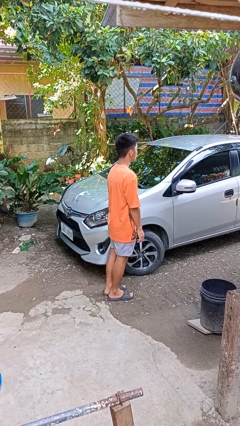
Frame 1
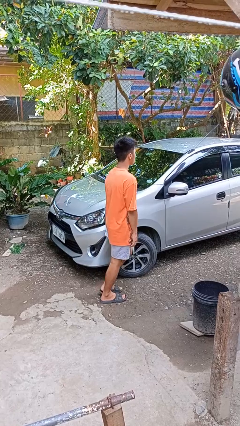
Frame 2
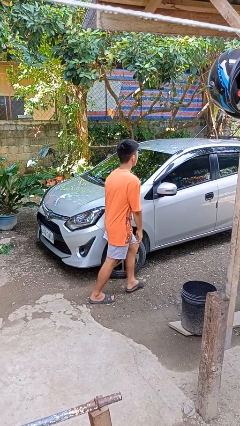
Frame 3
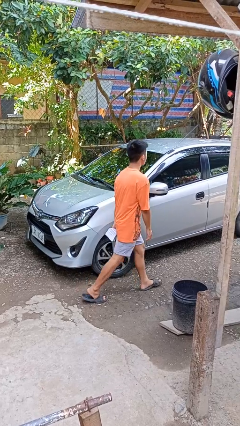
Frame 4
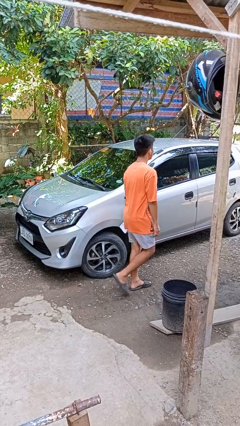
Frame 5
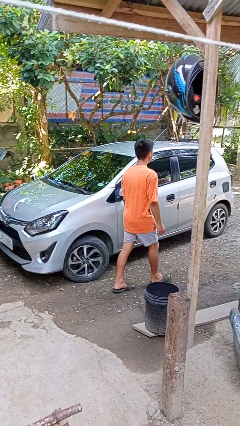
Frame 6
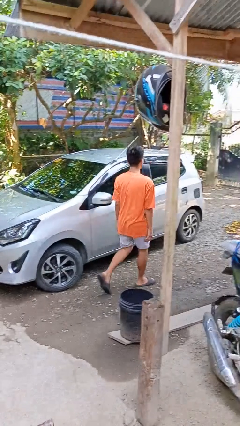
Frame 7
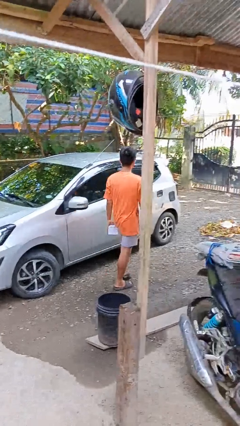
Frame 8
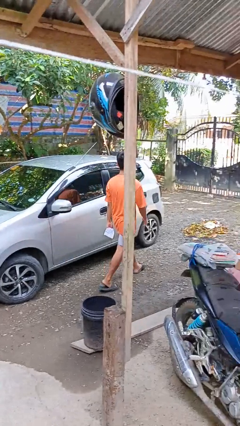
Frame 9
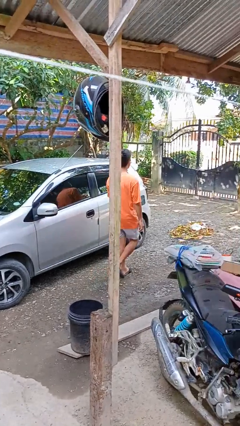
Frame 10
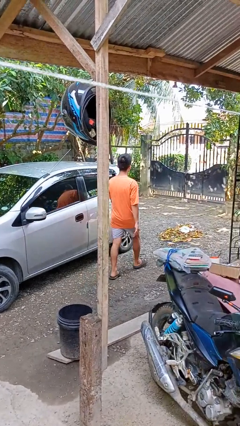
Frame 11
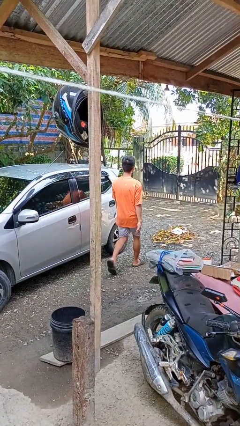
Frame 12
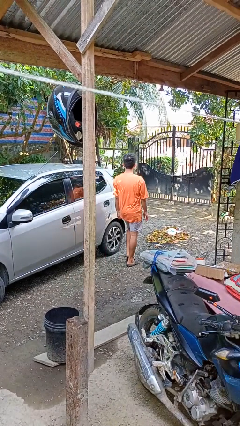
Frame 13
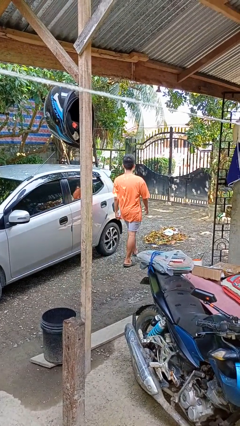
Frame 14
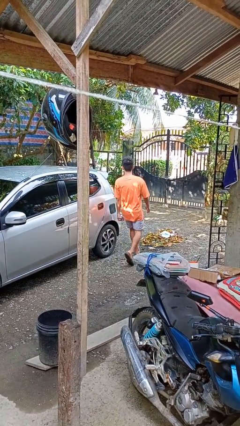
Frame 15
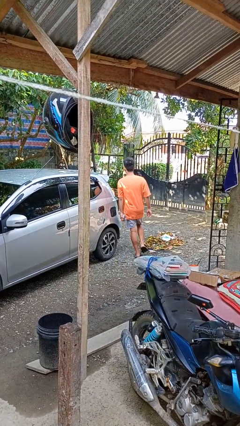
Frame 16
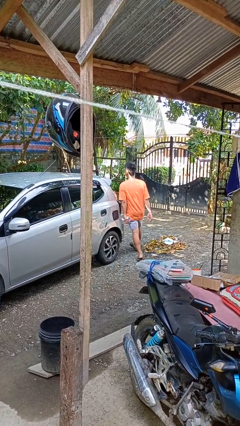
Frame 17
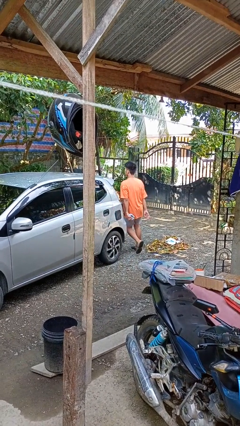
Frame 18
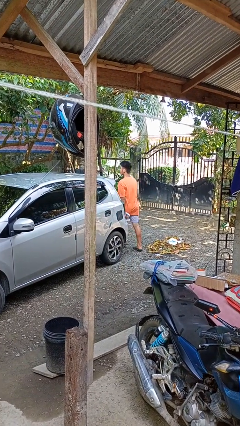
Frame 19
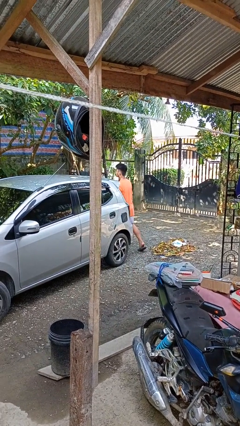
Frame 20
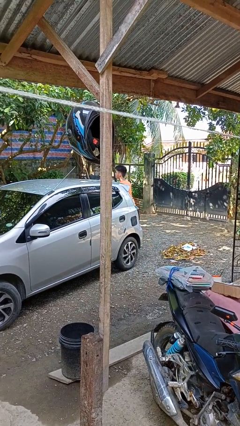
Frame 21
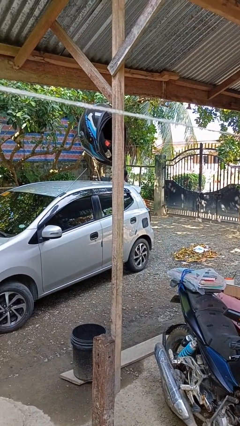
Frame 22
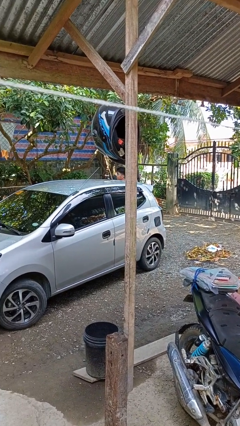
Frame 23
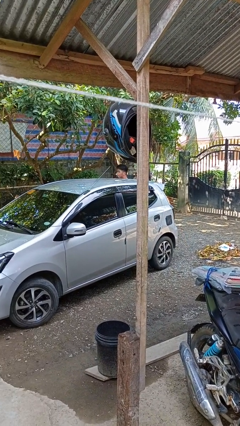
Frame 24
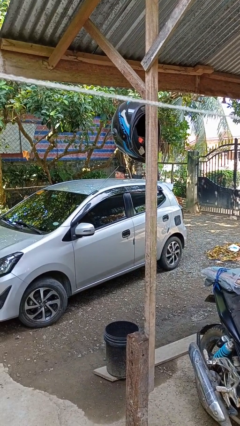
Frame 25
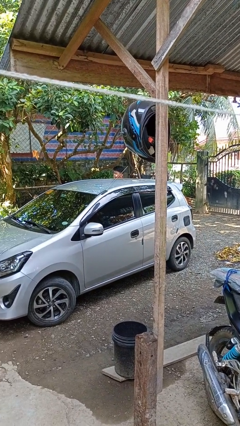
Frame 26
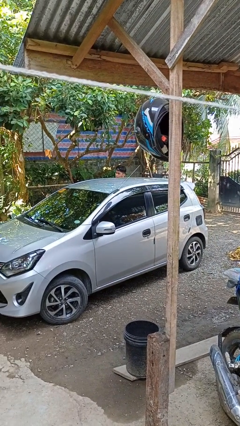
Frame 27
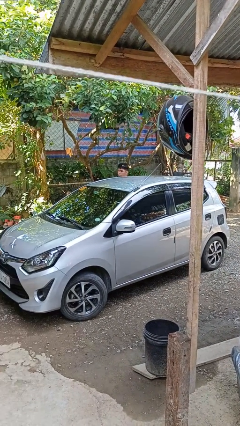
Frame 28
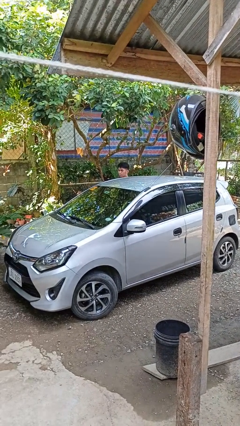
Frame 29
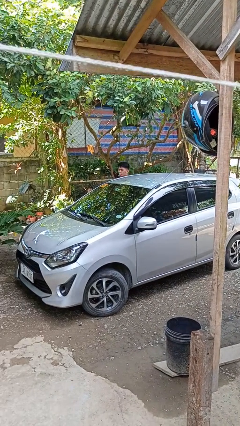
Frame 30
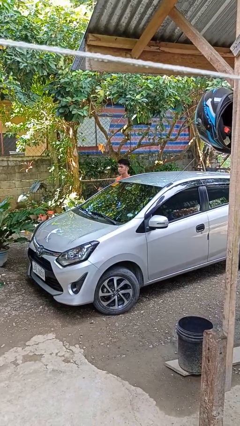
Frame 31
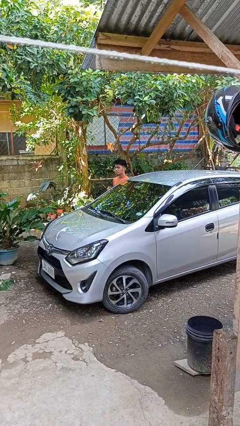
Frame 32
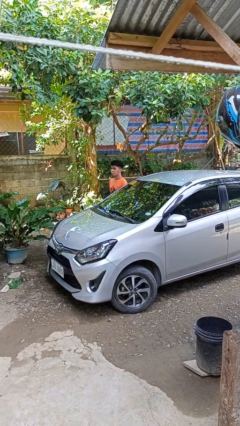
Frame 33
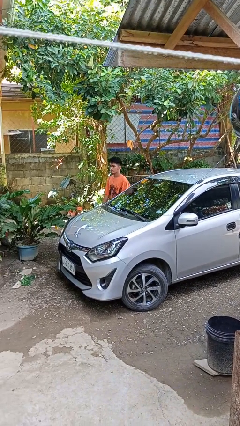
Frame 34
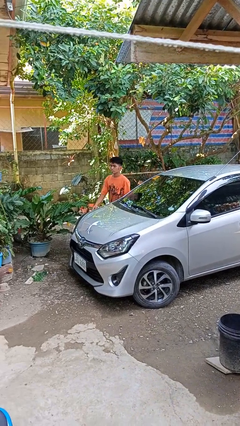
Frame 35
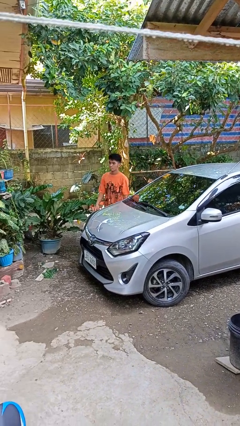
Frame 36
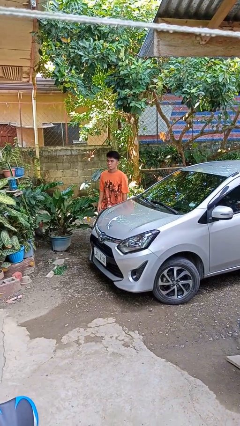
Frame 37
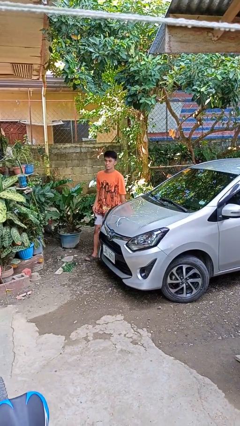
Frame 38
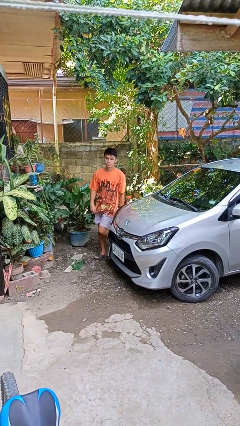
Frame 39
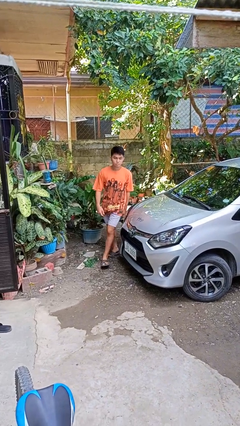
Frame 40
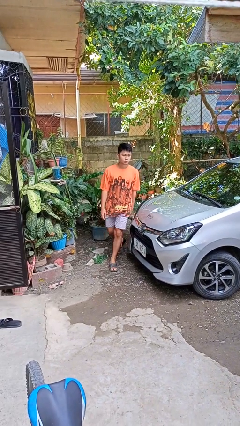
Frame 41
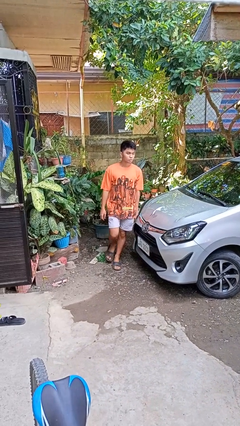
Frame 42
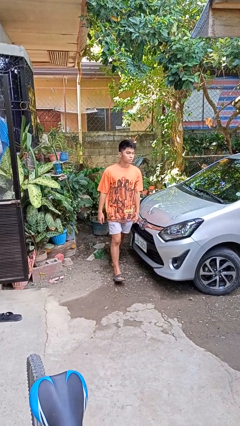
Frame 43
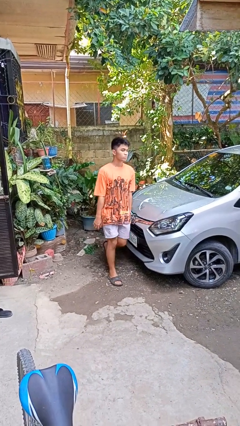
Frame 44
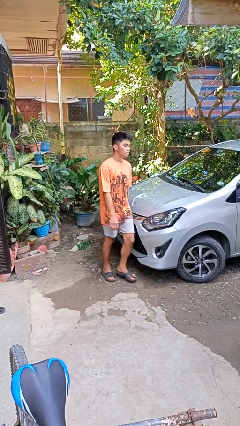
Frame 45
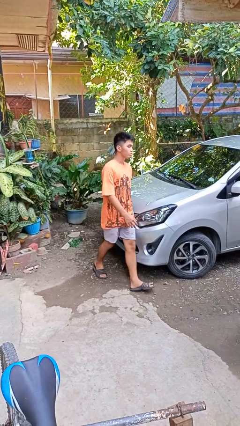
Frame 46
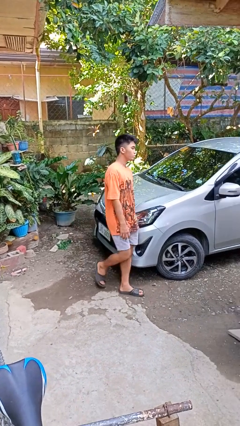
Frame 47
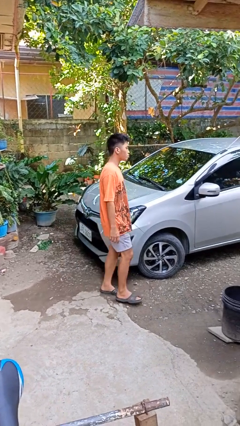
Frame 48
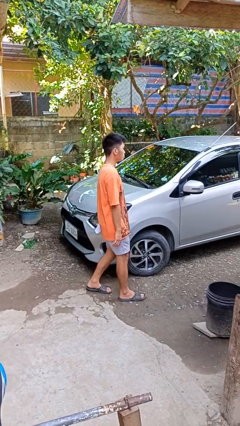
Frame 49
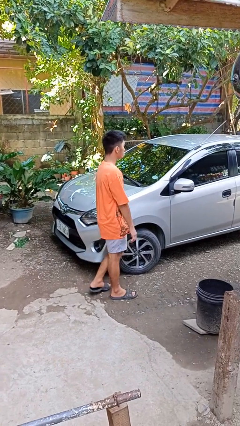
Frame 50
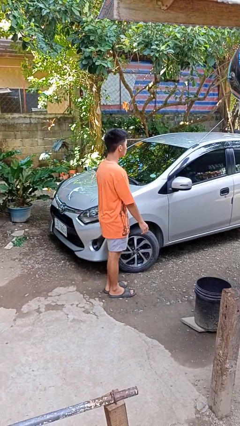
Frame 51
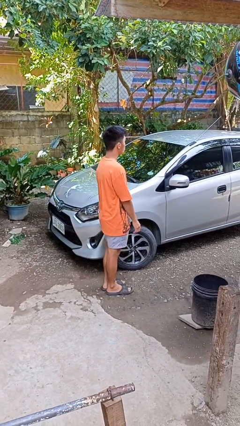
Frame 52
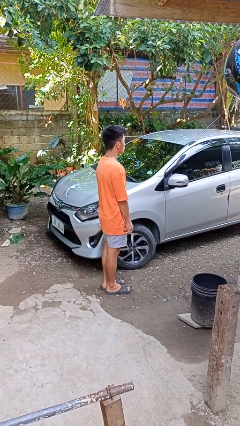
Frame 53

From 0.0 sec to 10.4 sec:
person walks around car

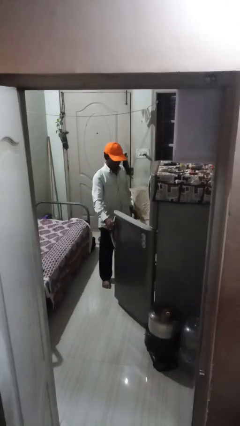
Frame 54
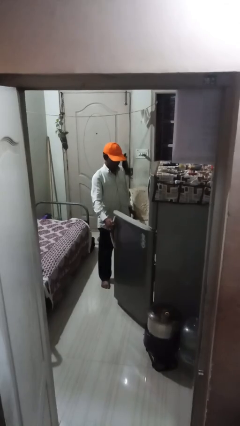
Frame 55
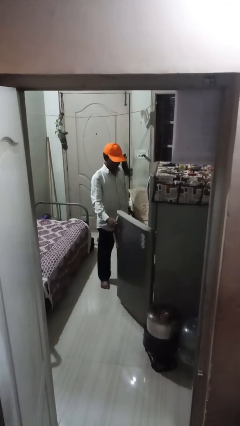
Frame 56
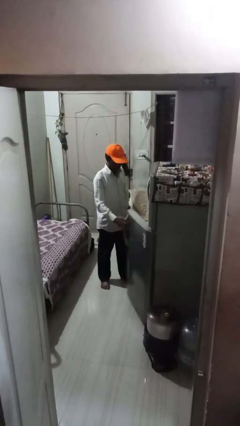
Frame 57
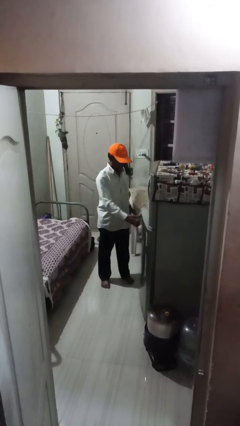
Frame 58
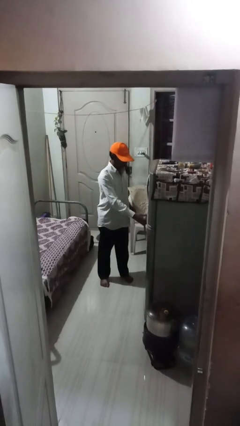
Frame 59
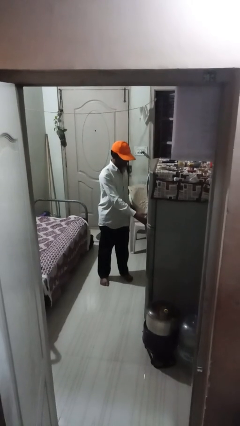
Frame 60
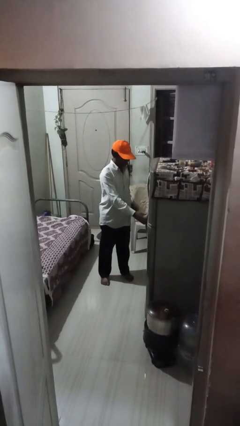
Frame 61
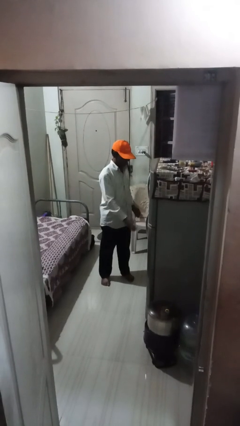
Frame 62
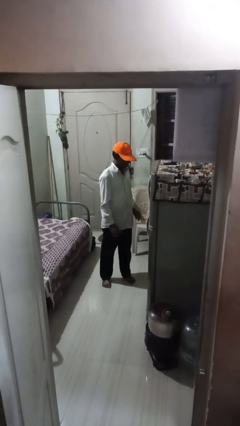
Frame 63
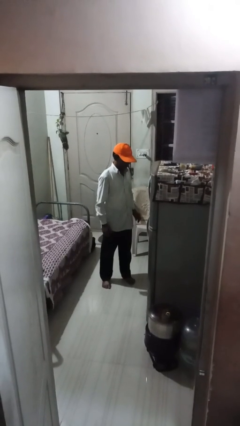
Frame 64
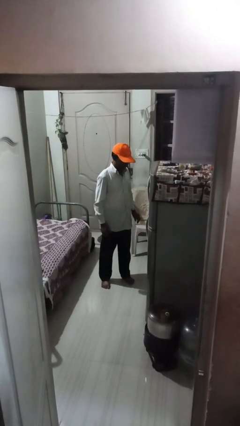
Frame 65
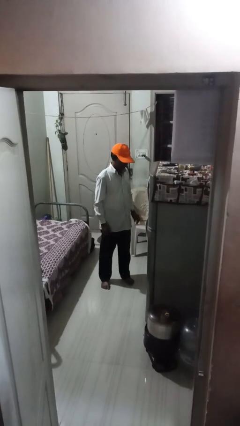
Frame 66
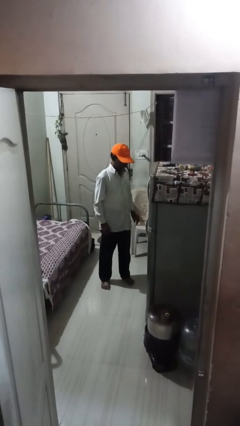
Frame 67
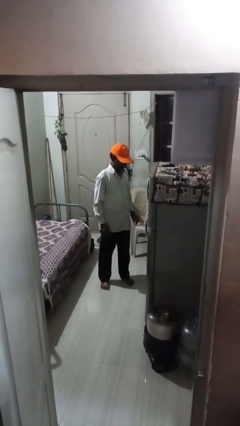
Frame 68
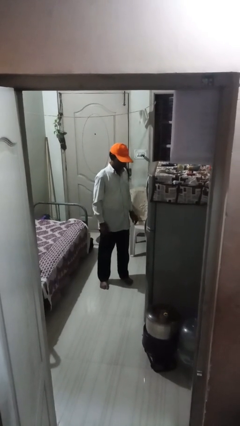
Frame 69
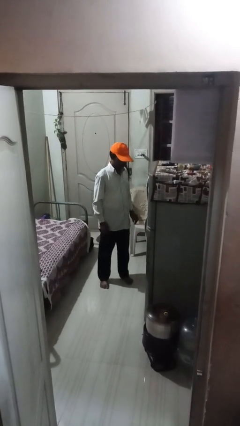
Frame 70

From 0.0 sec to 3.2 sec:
person closes refrigerator

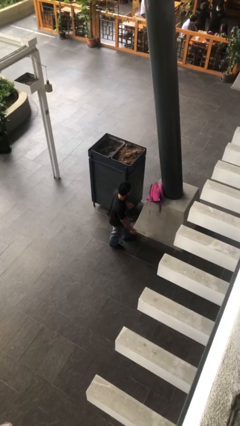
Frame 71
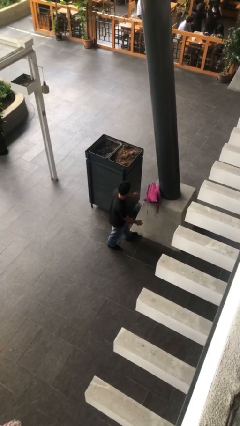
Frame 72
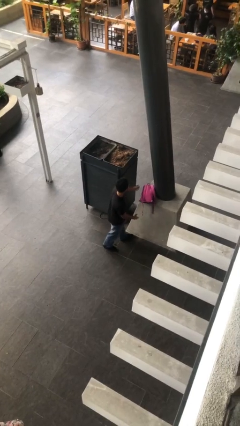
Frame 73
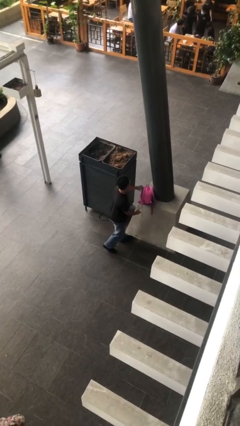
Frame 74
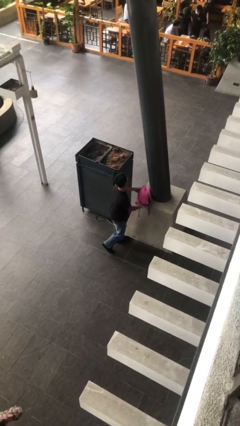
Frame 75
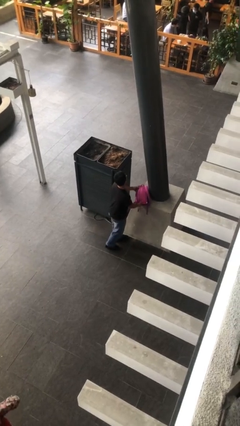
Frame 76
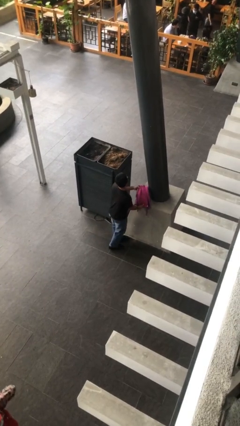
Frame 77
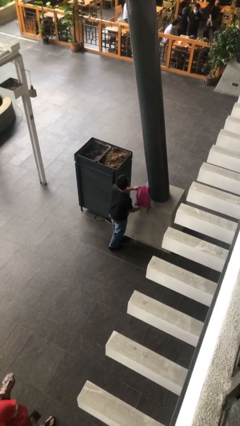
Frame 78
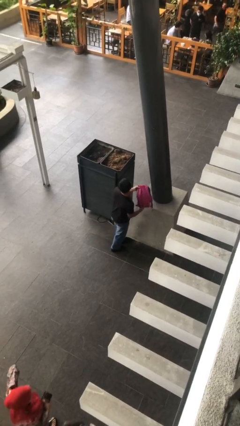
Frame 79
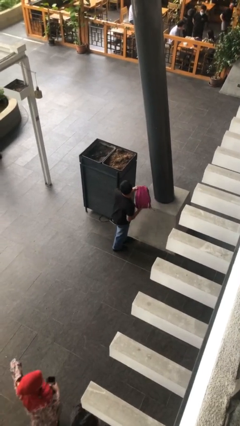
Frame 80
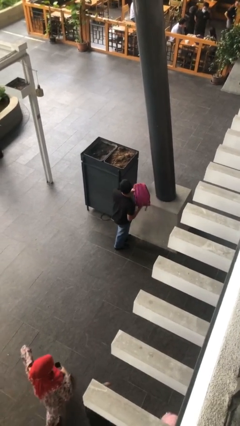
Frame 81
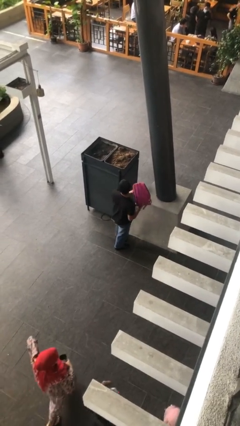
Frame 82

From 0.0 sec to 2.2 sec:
person picks up object from table

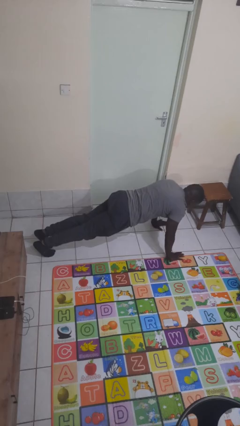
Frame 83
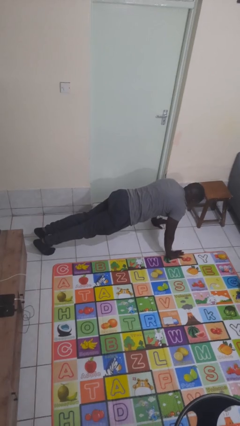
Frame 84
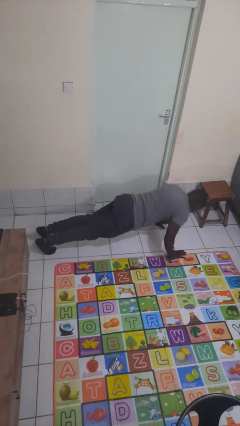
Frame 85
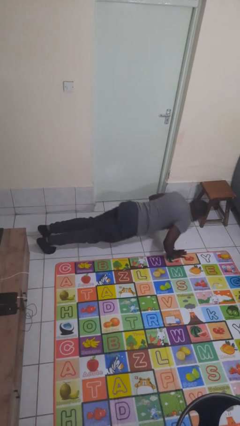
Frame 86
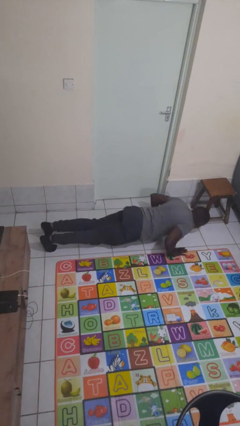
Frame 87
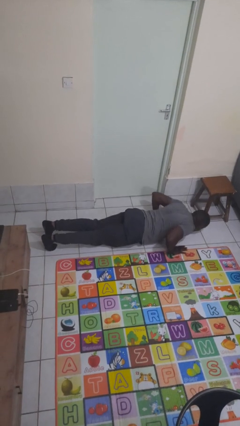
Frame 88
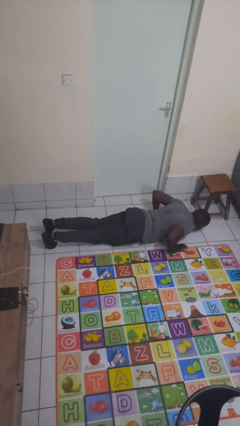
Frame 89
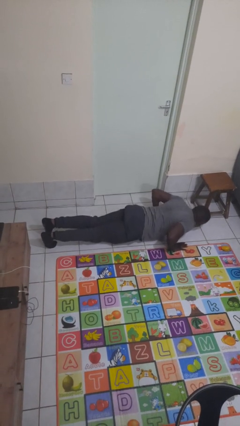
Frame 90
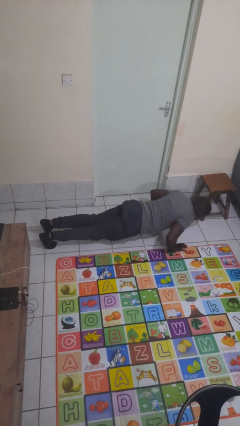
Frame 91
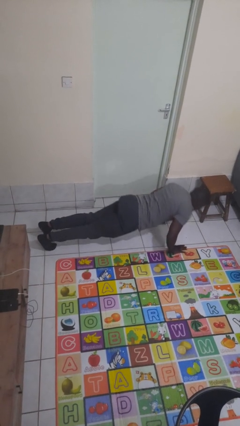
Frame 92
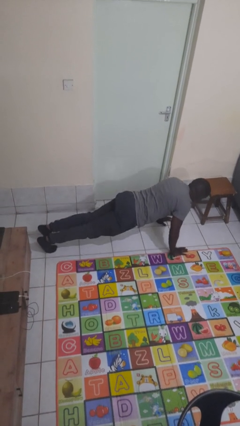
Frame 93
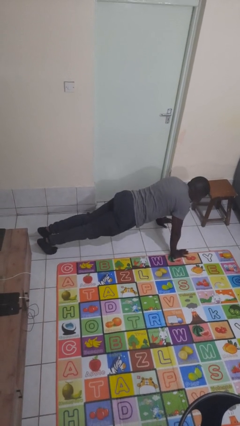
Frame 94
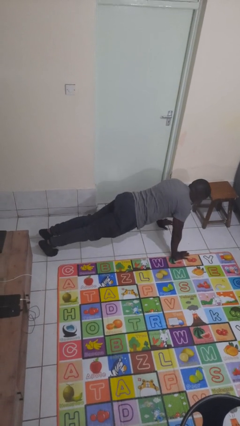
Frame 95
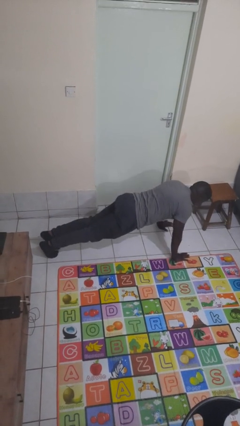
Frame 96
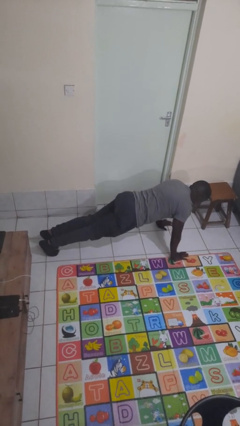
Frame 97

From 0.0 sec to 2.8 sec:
person exercises with pushup
